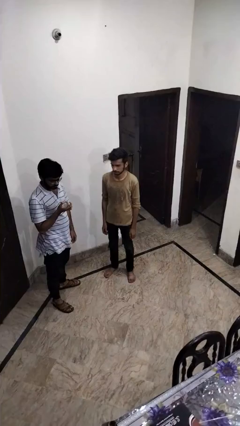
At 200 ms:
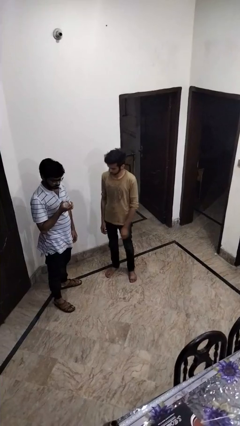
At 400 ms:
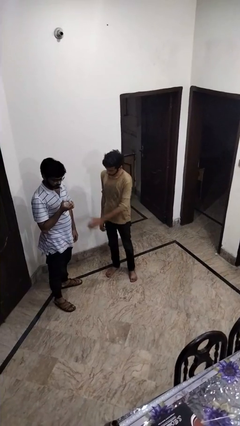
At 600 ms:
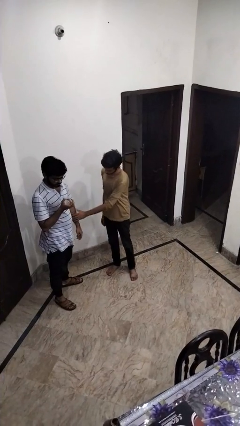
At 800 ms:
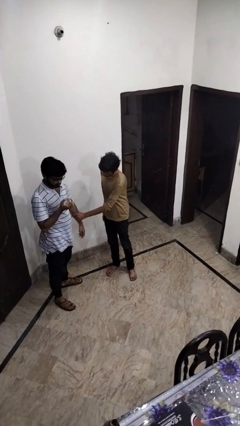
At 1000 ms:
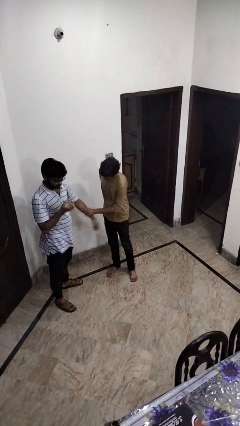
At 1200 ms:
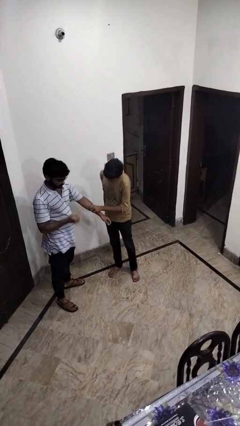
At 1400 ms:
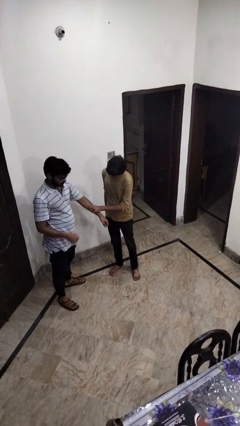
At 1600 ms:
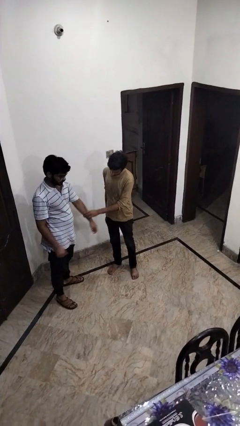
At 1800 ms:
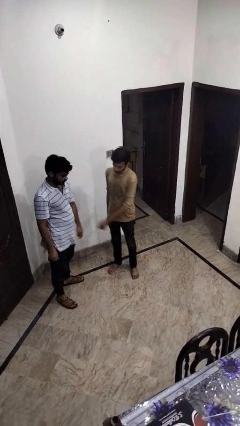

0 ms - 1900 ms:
person grabs person by forearm

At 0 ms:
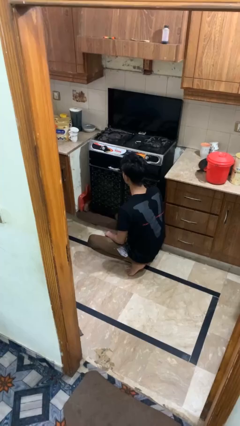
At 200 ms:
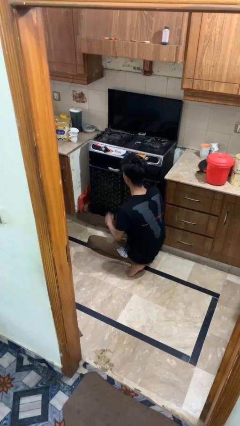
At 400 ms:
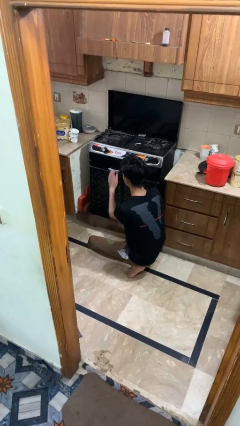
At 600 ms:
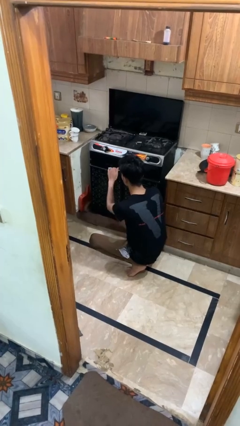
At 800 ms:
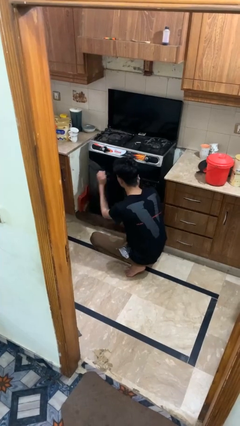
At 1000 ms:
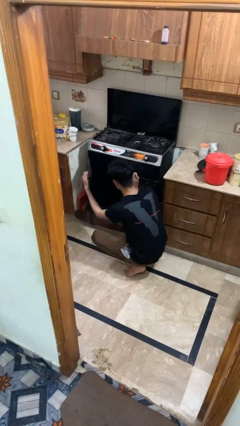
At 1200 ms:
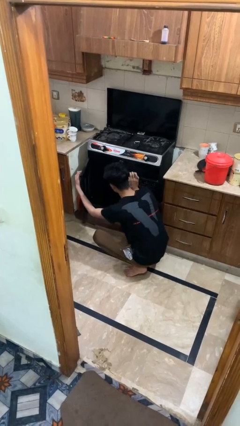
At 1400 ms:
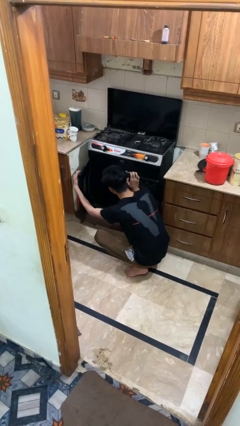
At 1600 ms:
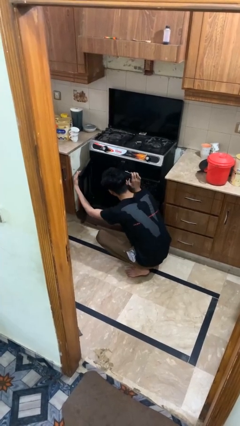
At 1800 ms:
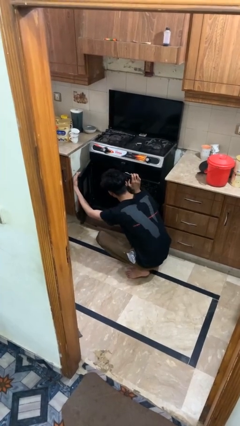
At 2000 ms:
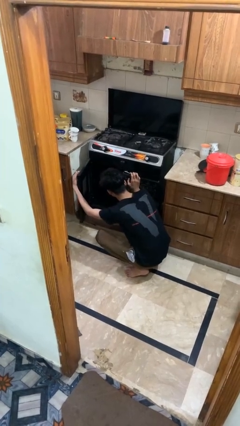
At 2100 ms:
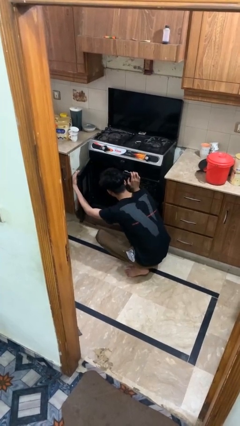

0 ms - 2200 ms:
person opens oven door

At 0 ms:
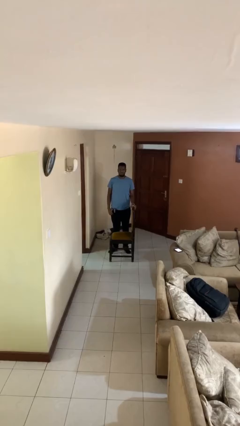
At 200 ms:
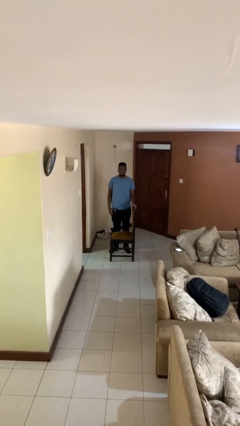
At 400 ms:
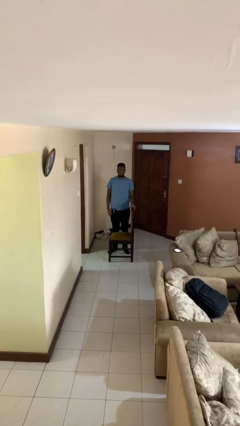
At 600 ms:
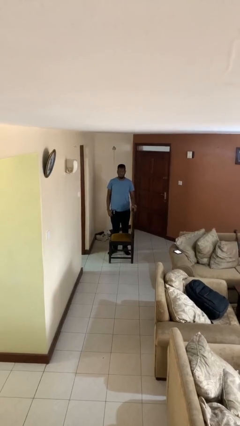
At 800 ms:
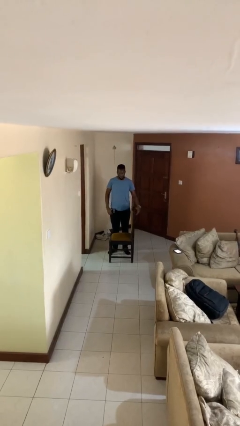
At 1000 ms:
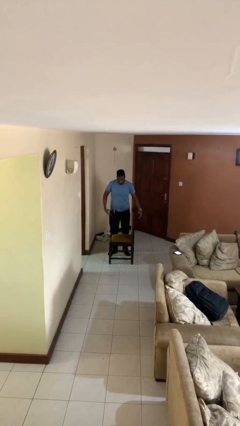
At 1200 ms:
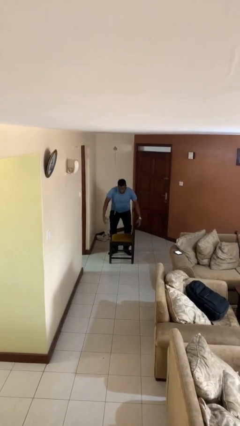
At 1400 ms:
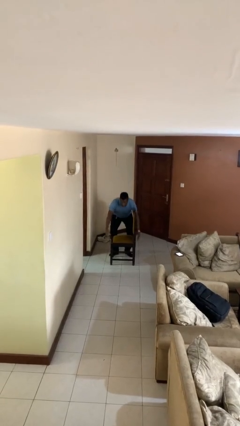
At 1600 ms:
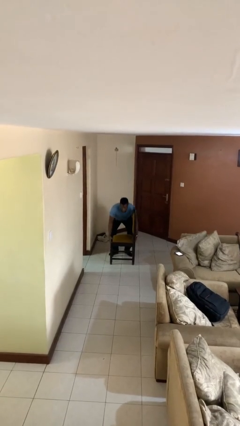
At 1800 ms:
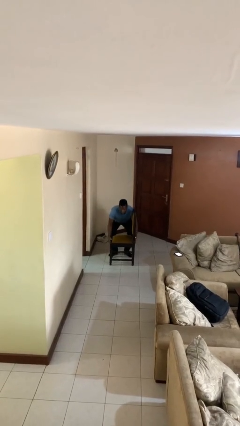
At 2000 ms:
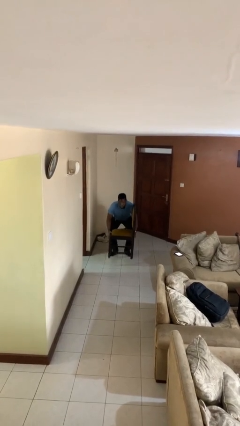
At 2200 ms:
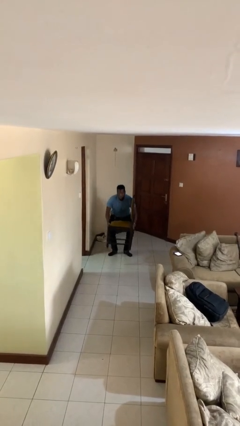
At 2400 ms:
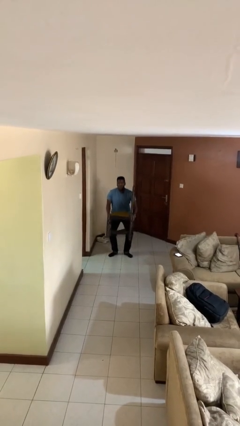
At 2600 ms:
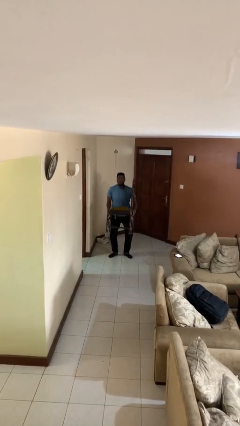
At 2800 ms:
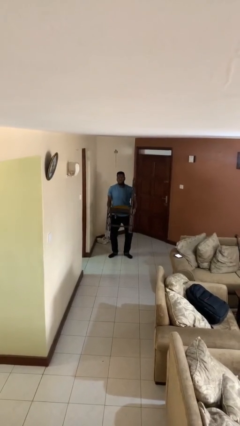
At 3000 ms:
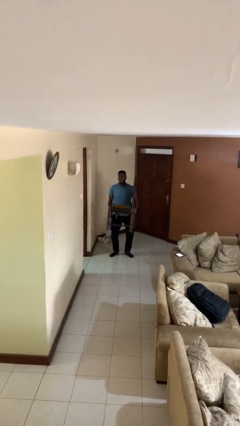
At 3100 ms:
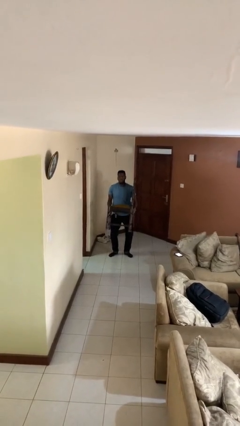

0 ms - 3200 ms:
person picks up object from floor

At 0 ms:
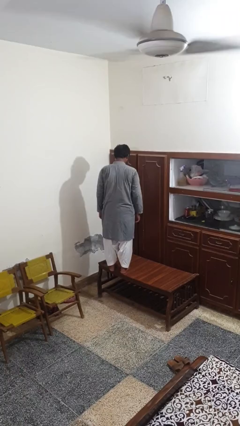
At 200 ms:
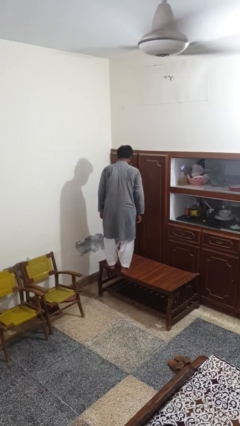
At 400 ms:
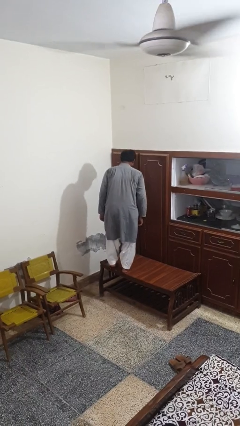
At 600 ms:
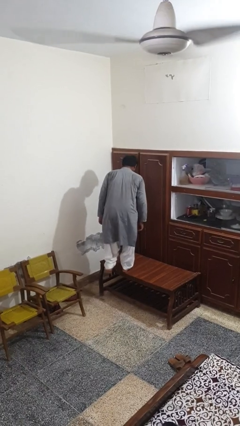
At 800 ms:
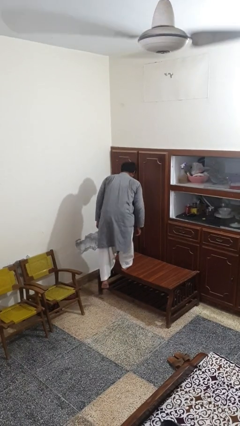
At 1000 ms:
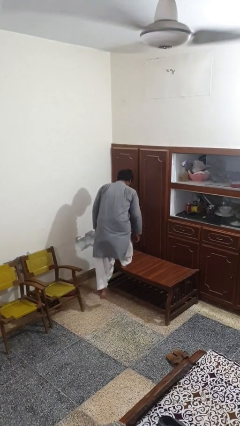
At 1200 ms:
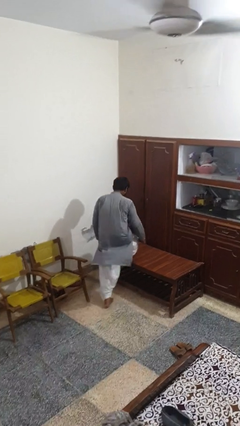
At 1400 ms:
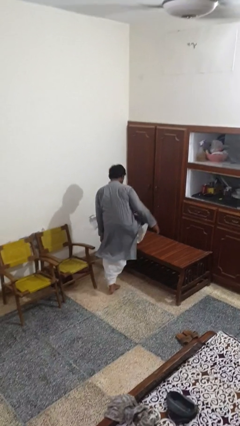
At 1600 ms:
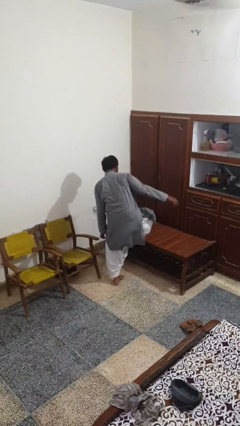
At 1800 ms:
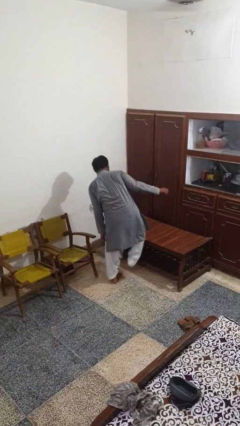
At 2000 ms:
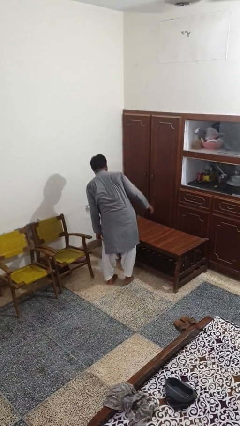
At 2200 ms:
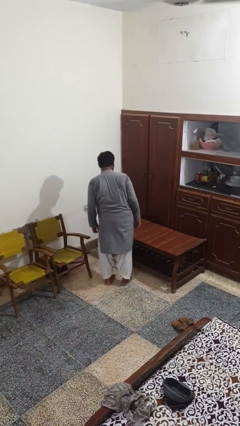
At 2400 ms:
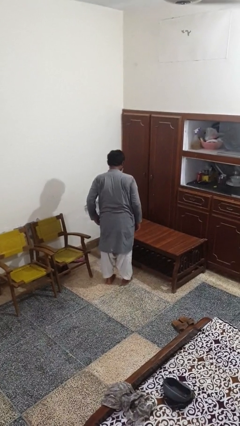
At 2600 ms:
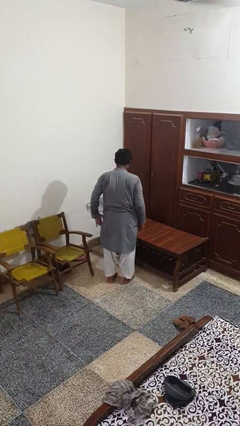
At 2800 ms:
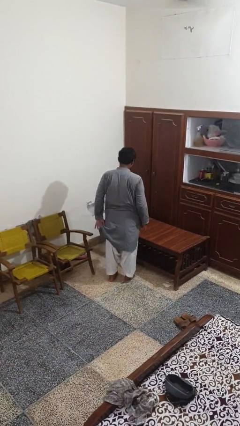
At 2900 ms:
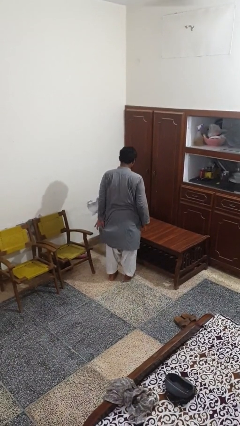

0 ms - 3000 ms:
person climbs off table

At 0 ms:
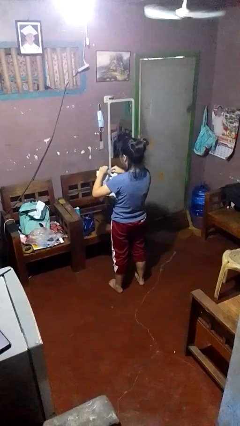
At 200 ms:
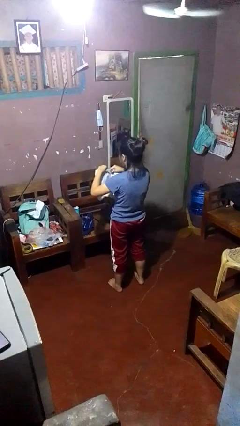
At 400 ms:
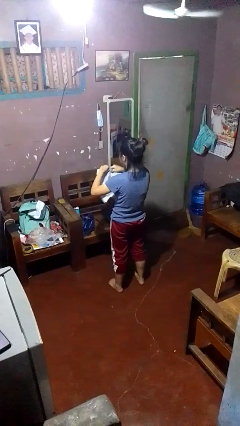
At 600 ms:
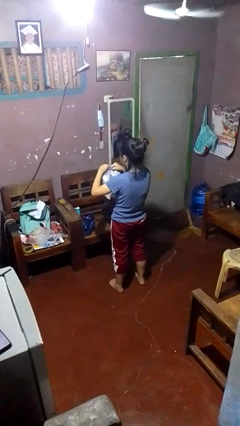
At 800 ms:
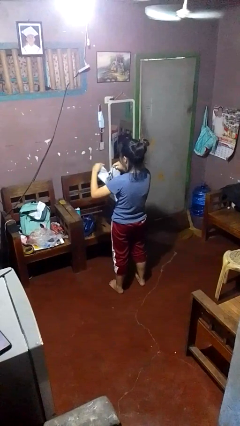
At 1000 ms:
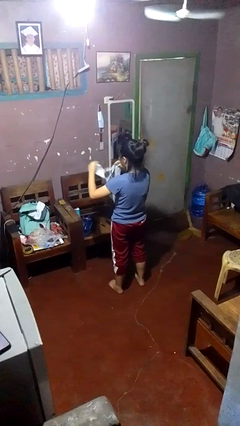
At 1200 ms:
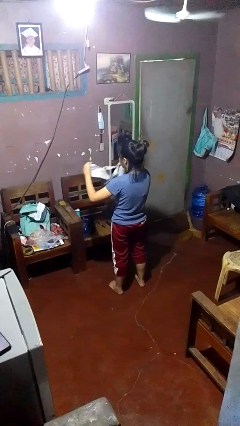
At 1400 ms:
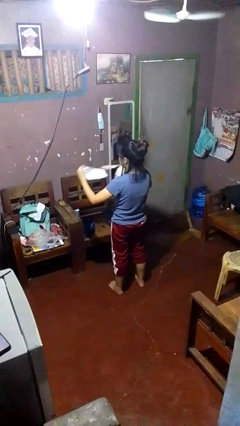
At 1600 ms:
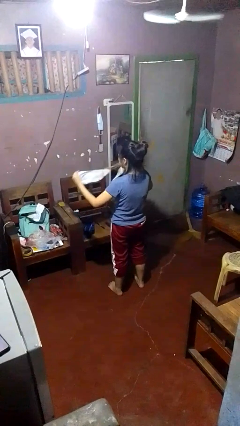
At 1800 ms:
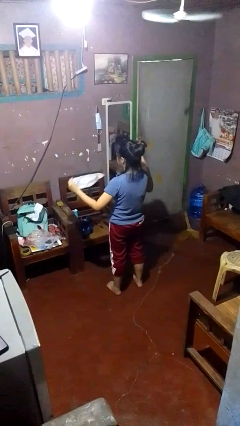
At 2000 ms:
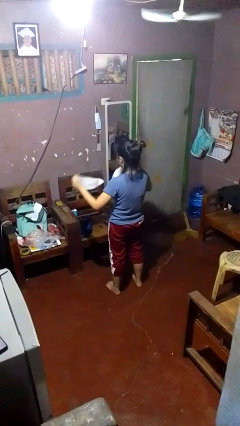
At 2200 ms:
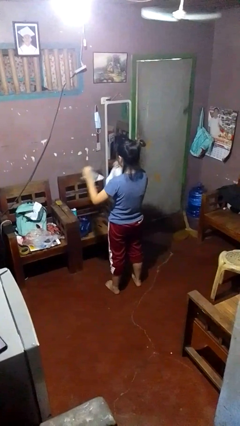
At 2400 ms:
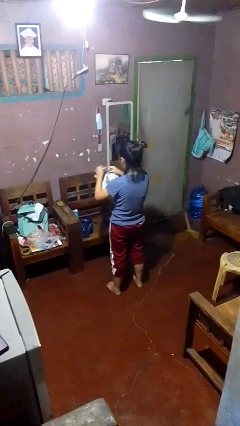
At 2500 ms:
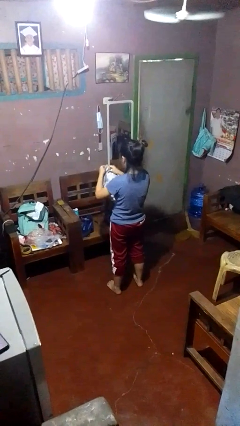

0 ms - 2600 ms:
person tears paper

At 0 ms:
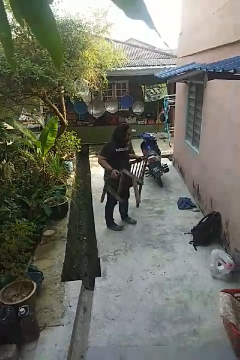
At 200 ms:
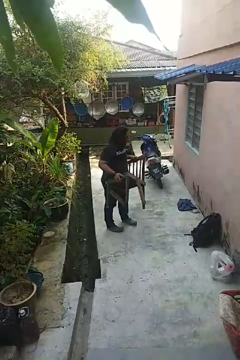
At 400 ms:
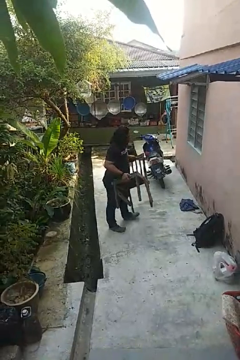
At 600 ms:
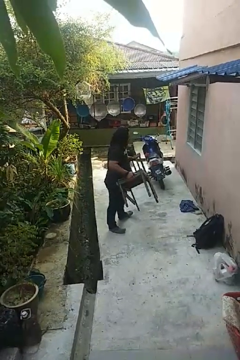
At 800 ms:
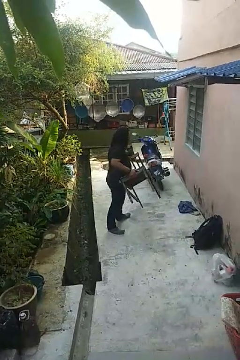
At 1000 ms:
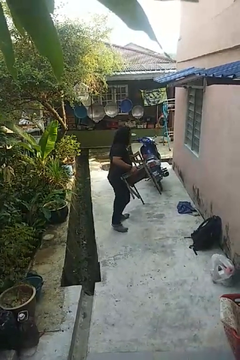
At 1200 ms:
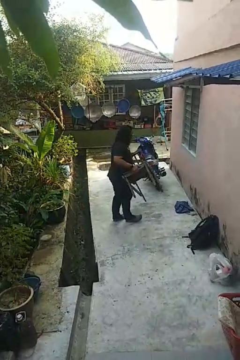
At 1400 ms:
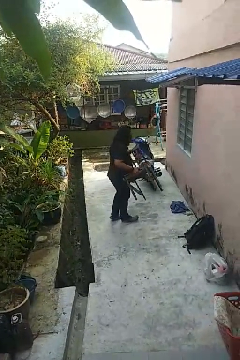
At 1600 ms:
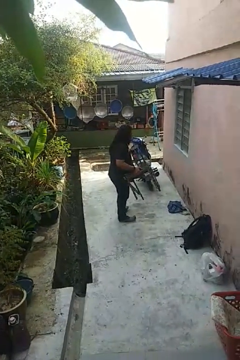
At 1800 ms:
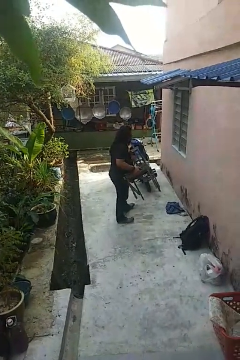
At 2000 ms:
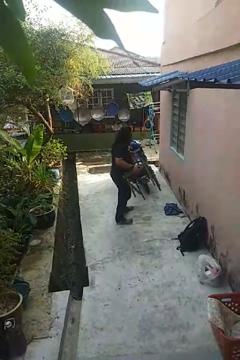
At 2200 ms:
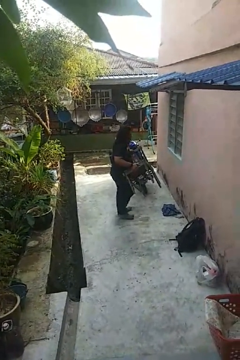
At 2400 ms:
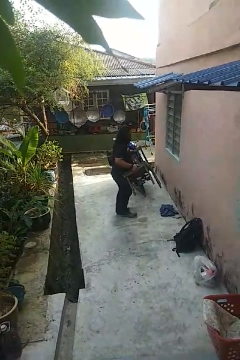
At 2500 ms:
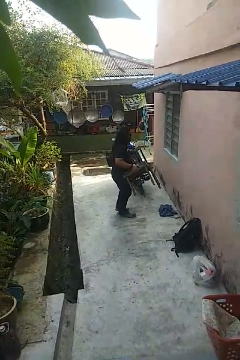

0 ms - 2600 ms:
person carries furniture

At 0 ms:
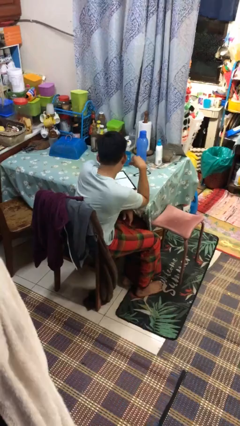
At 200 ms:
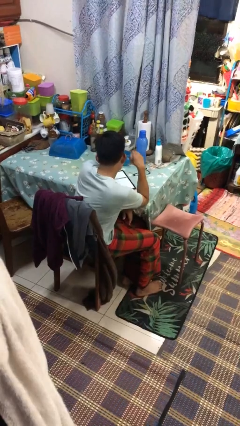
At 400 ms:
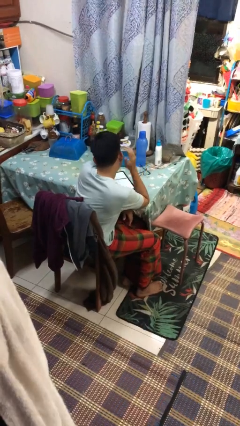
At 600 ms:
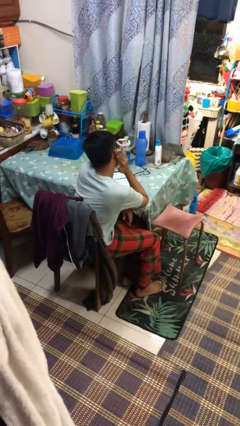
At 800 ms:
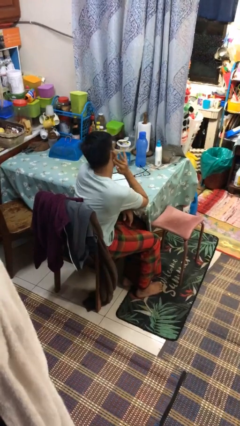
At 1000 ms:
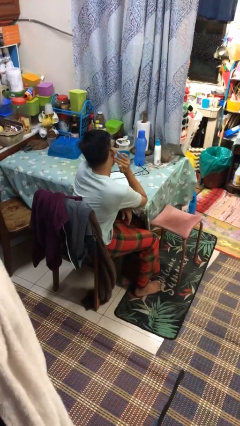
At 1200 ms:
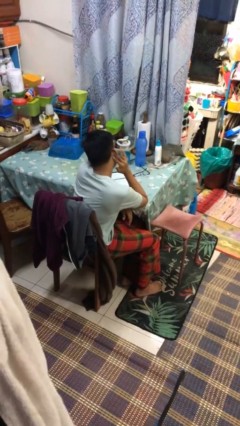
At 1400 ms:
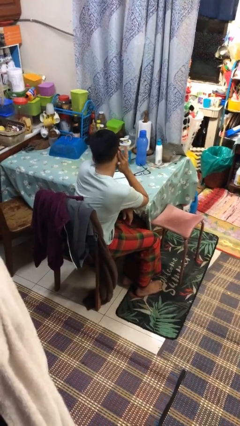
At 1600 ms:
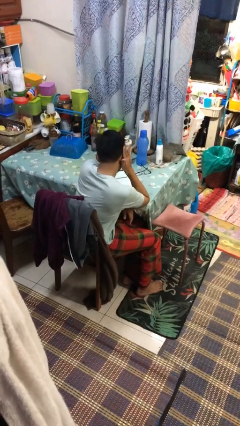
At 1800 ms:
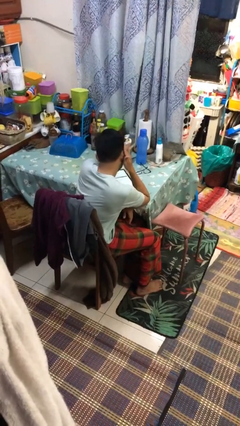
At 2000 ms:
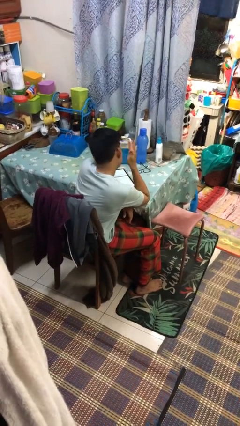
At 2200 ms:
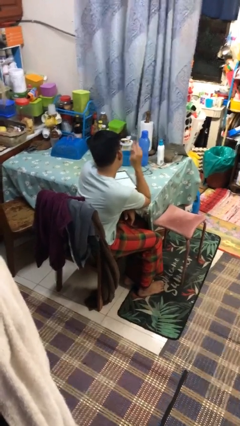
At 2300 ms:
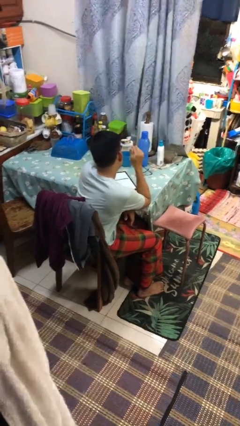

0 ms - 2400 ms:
person touches earlobe

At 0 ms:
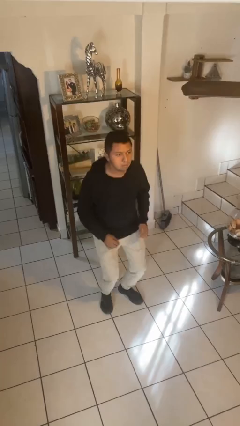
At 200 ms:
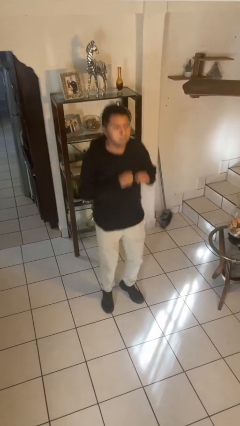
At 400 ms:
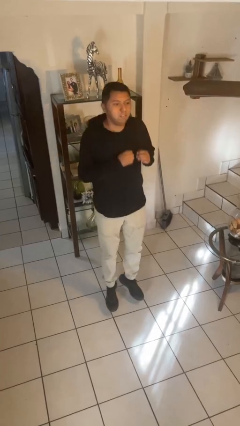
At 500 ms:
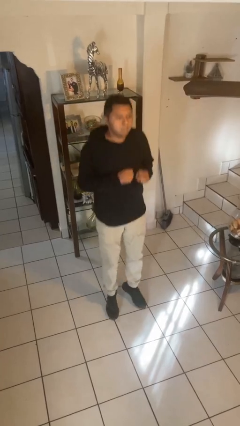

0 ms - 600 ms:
person jumps
